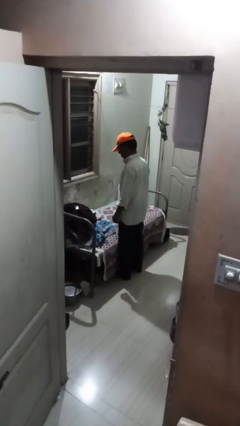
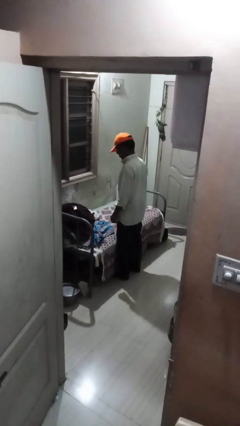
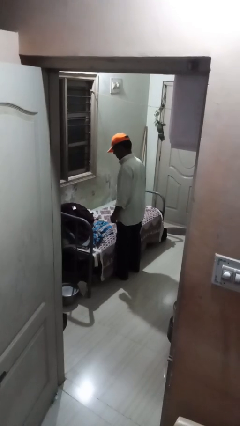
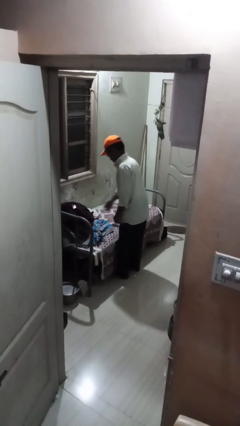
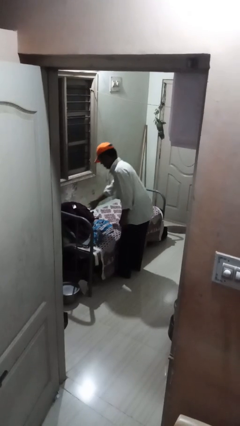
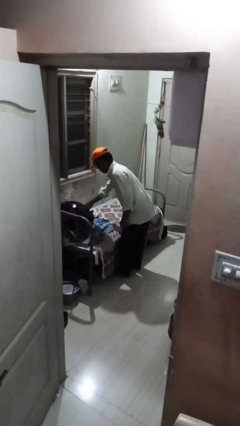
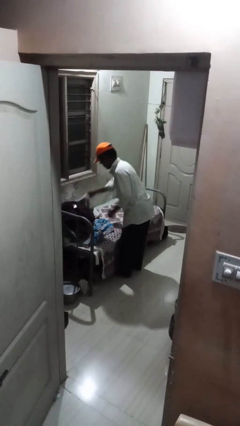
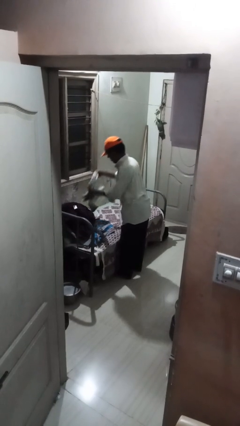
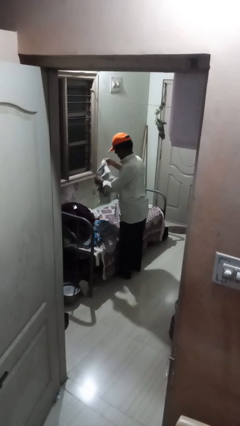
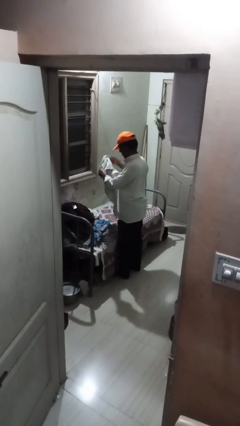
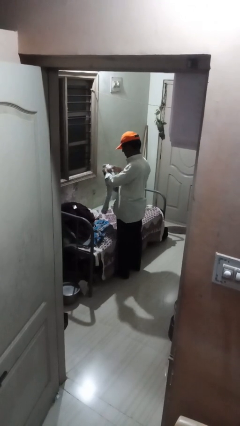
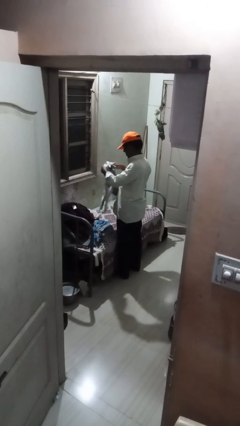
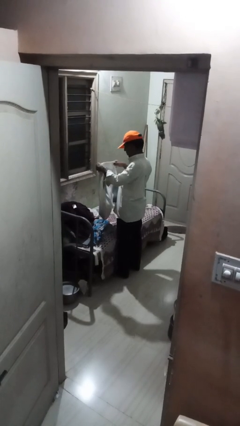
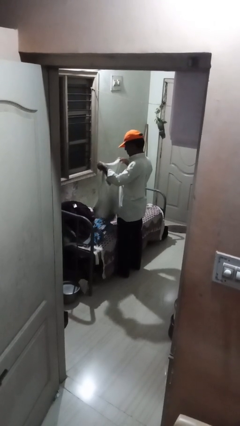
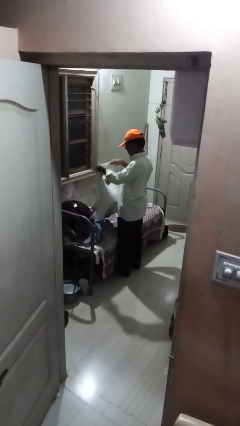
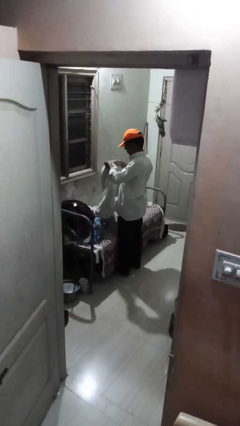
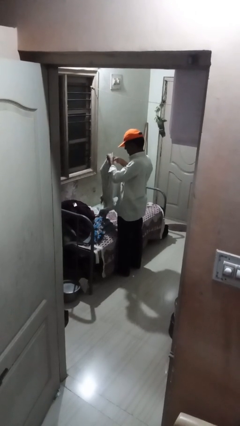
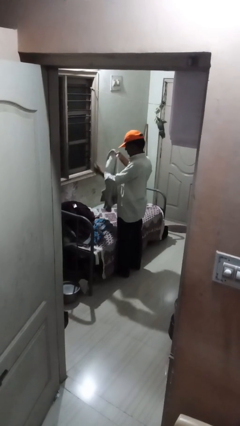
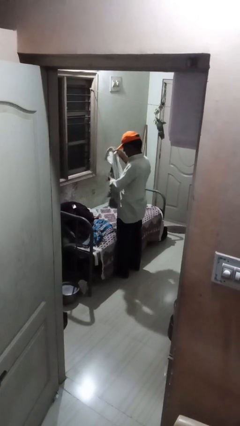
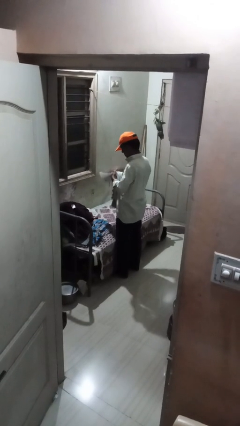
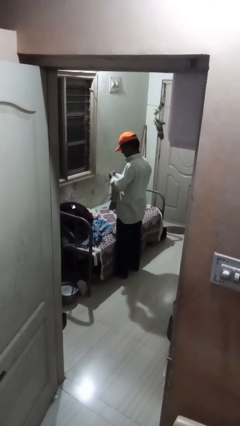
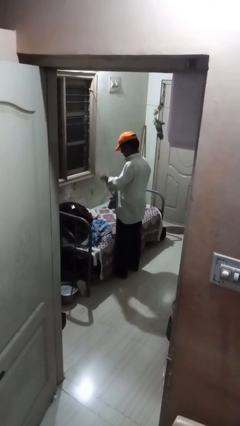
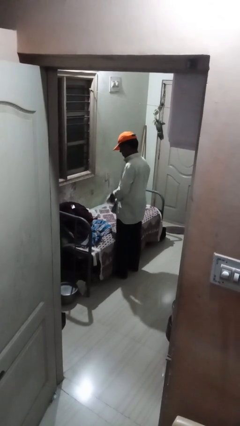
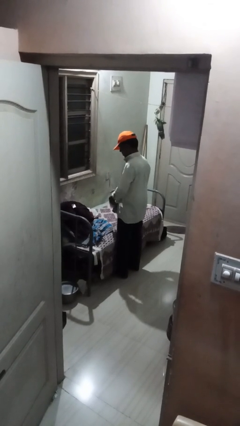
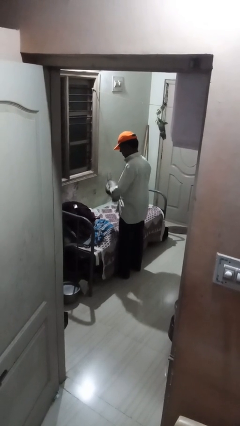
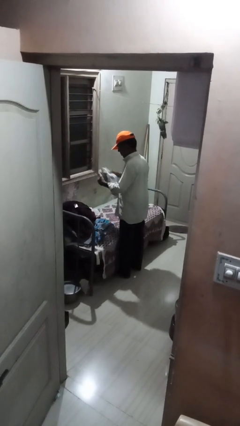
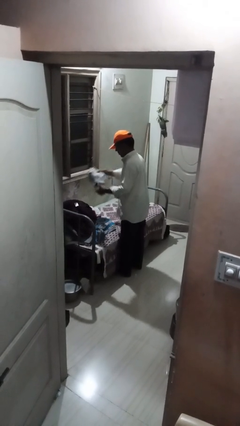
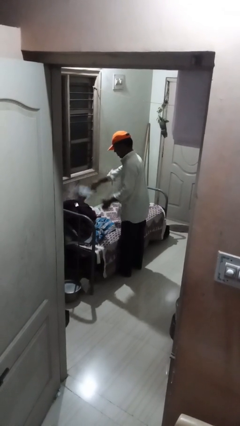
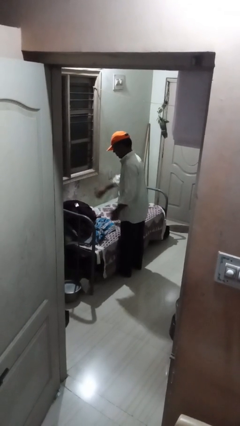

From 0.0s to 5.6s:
person folds shirt

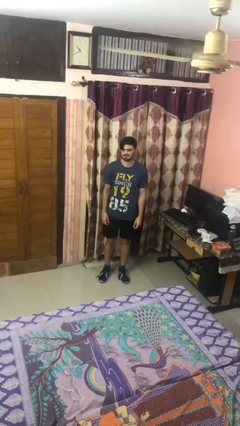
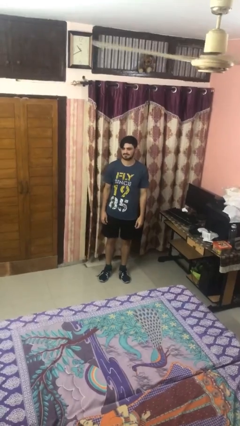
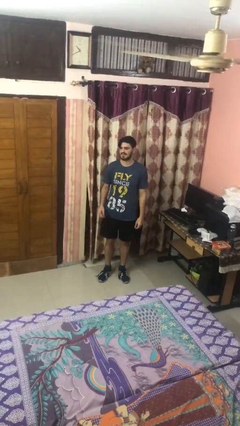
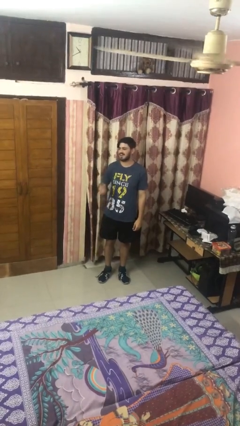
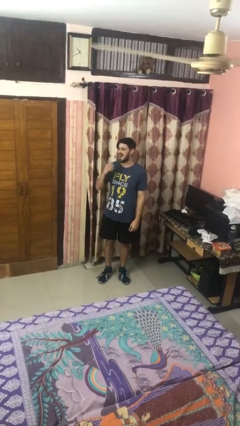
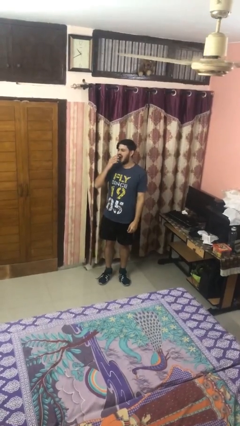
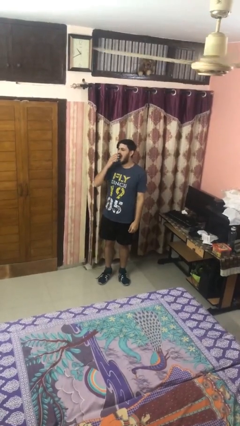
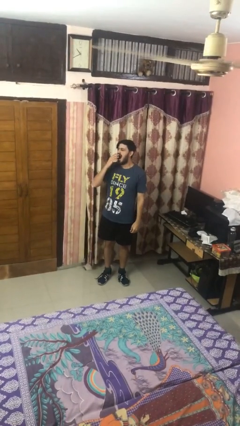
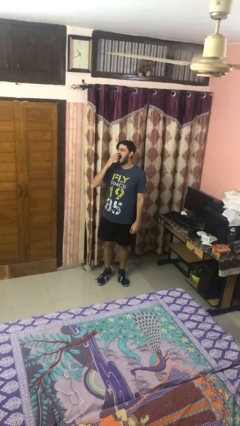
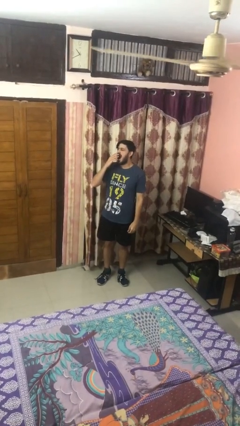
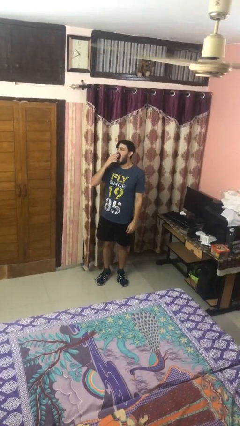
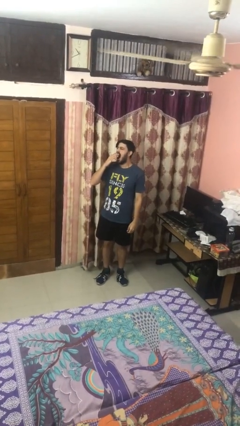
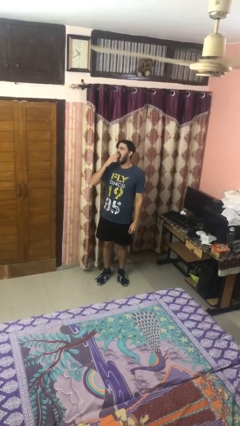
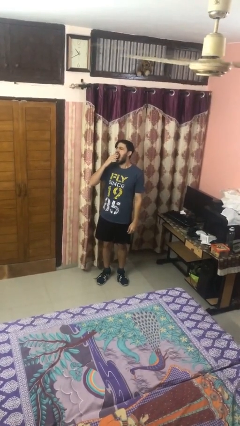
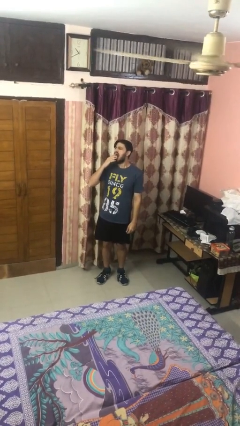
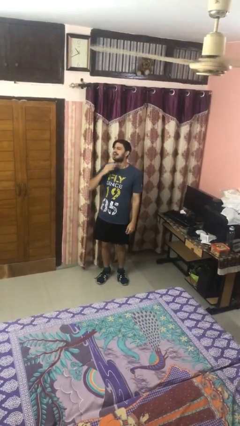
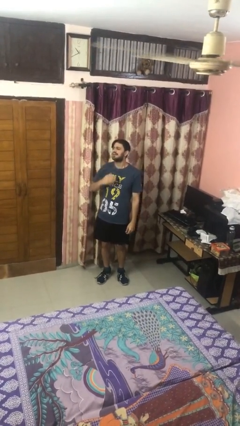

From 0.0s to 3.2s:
person yawns

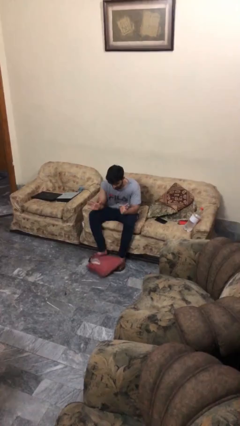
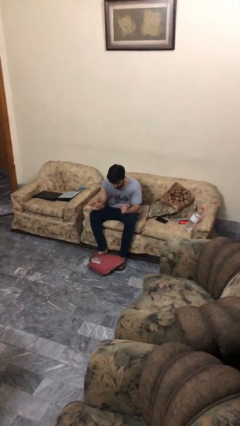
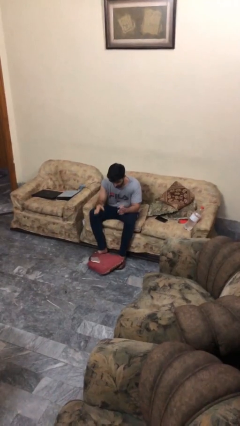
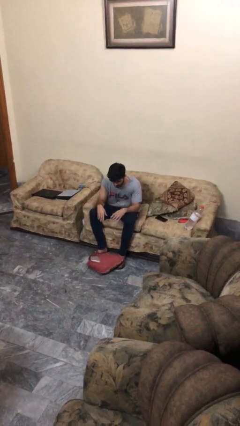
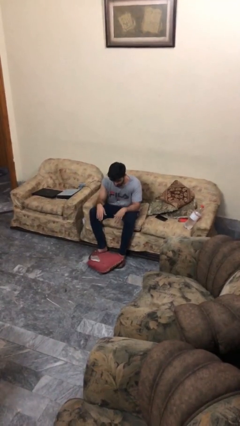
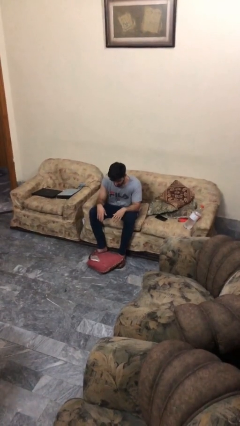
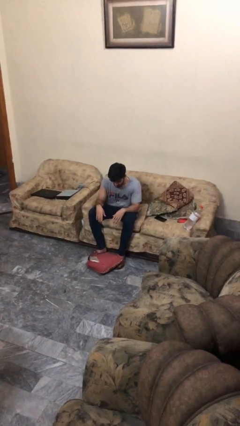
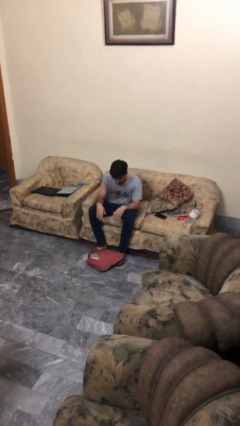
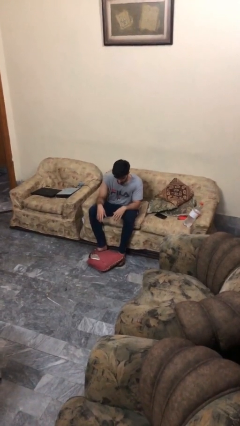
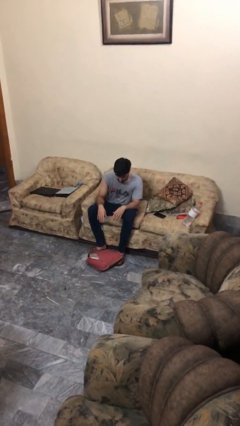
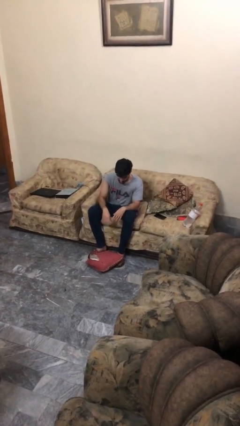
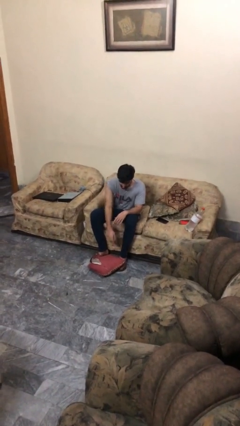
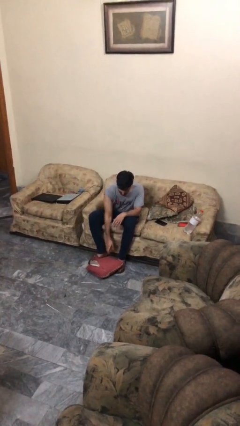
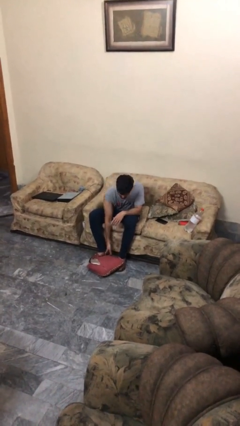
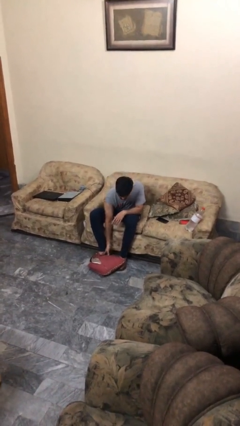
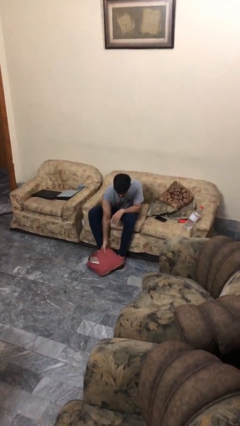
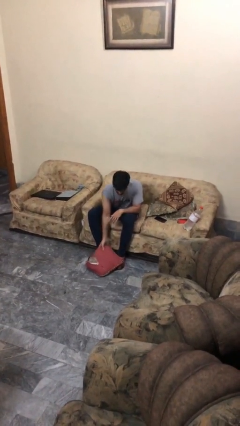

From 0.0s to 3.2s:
person drops object

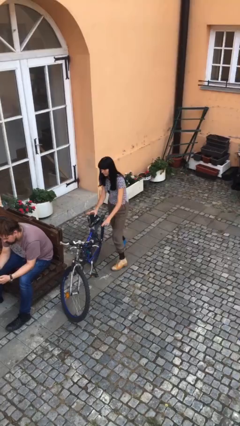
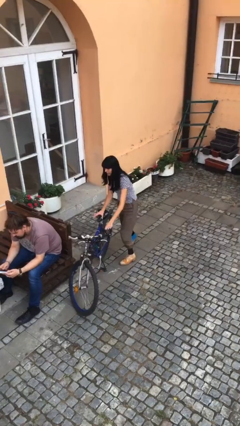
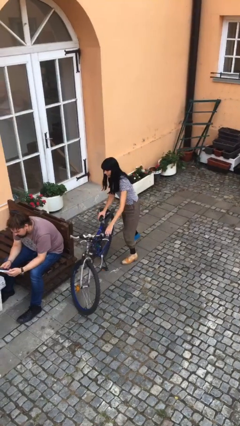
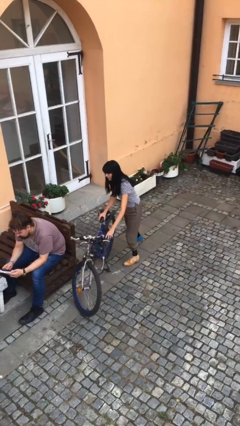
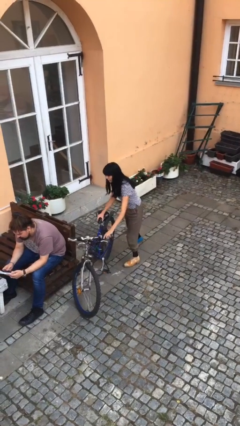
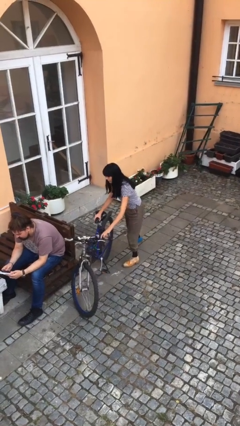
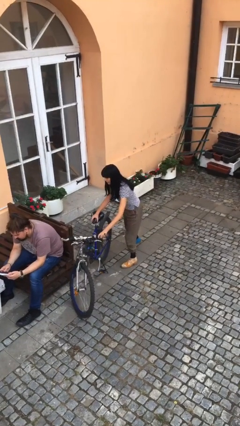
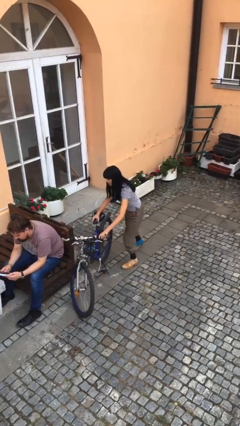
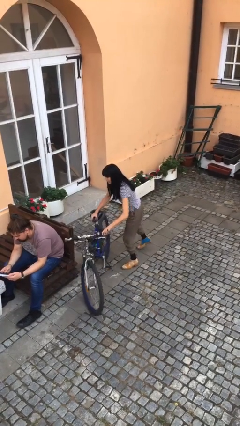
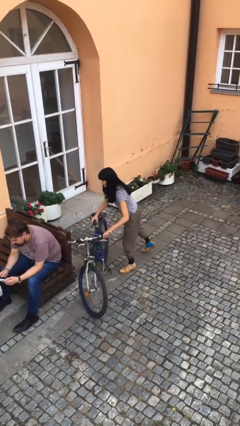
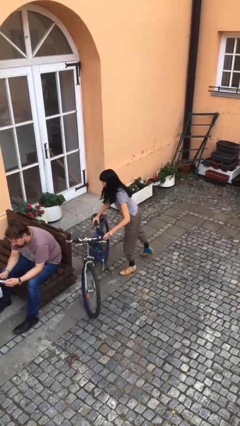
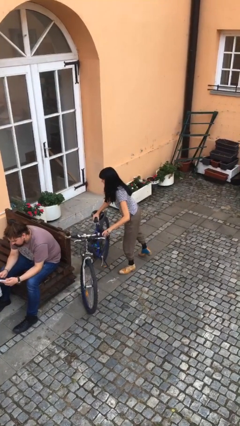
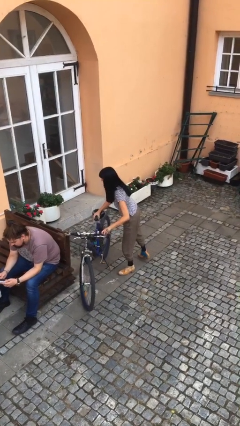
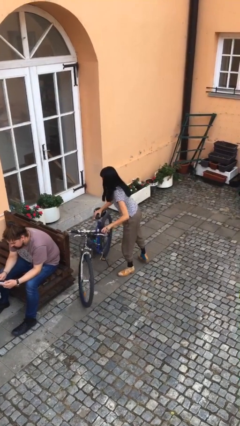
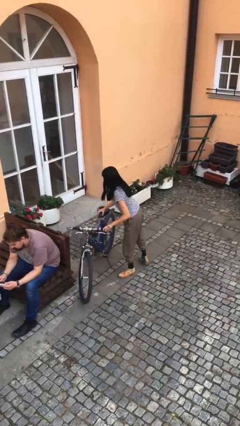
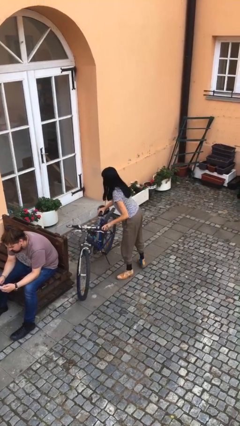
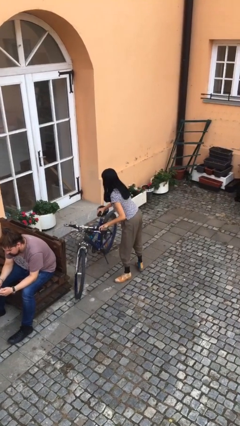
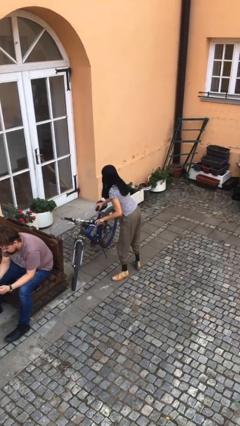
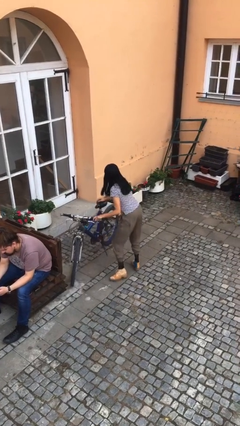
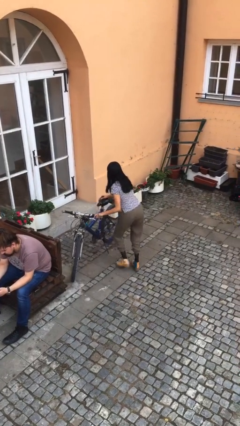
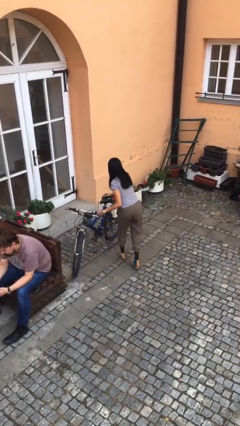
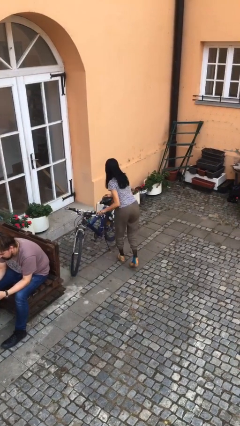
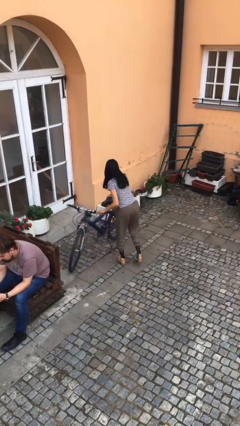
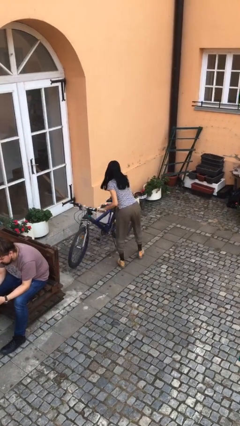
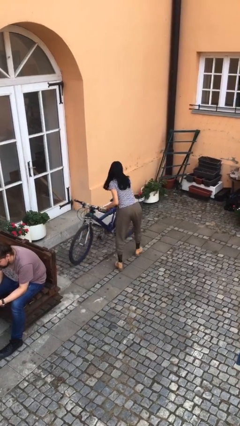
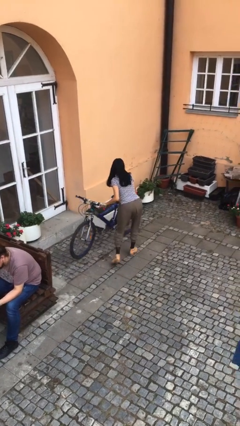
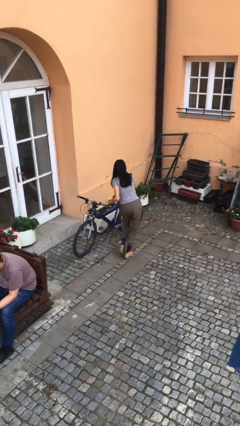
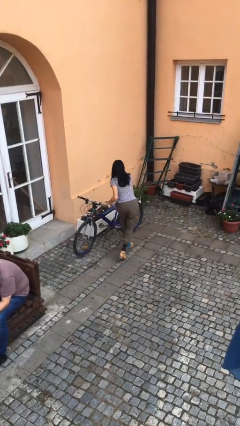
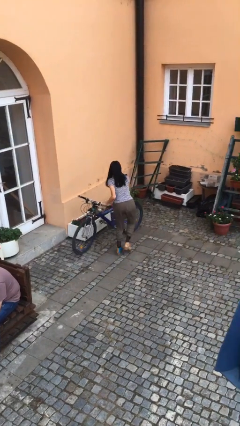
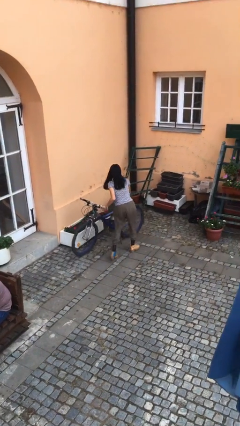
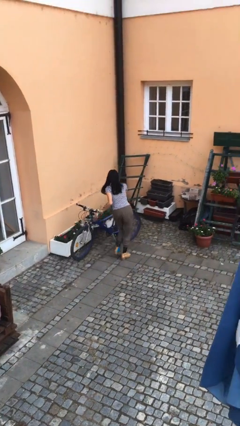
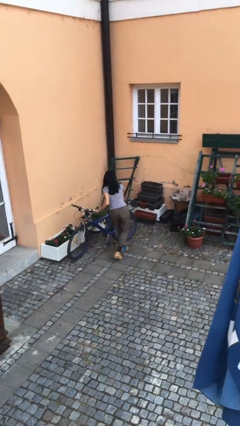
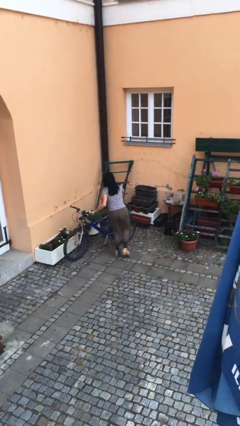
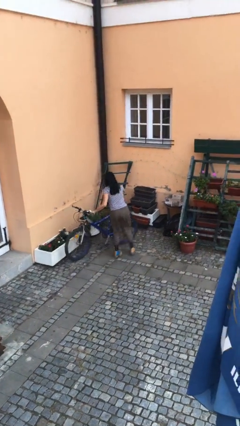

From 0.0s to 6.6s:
person steals object from person
